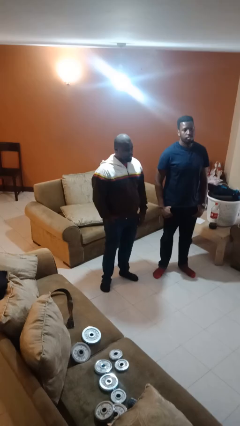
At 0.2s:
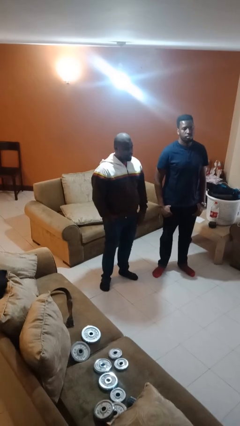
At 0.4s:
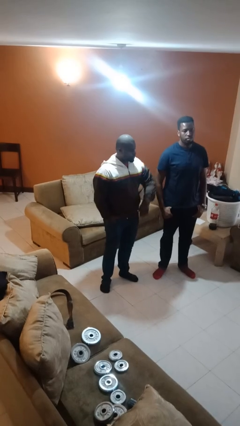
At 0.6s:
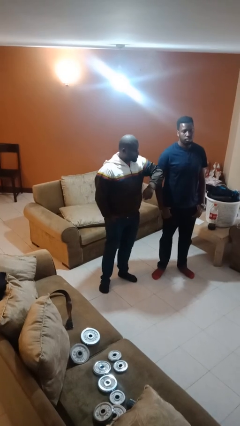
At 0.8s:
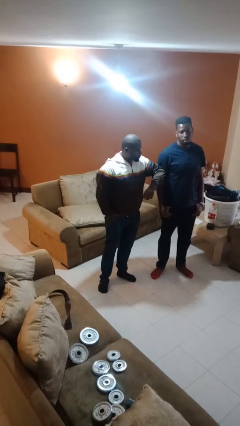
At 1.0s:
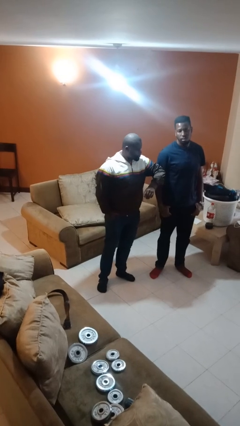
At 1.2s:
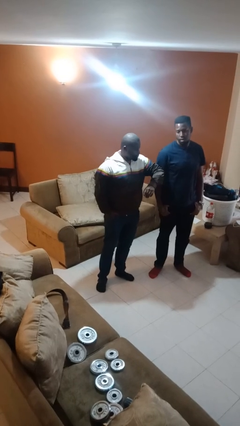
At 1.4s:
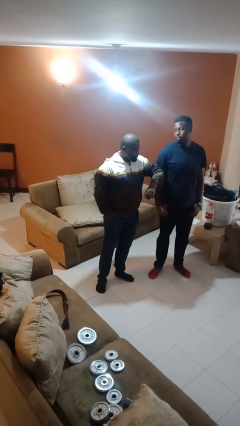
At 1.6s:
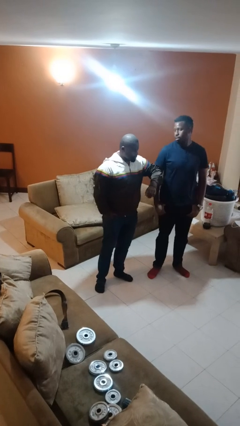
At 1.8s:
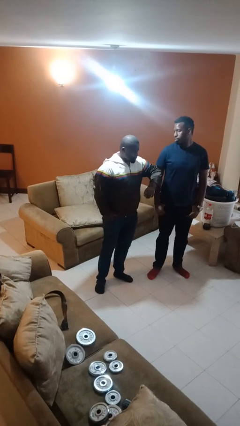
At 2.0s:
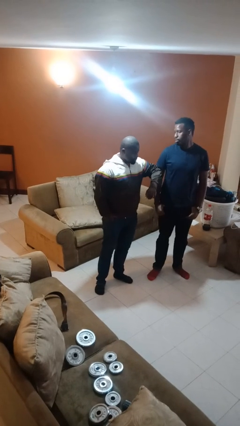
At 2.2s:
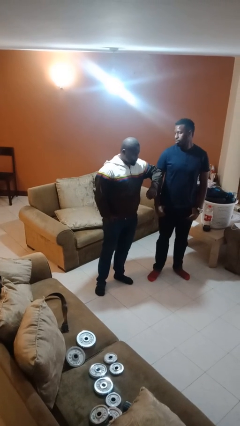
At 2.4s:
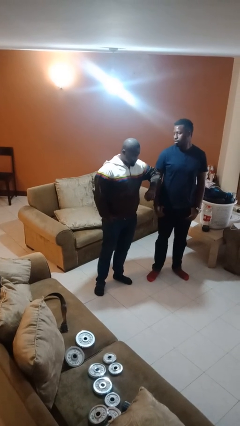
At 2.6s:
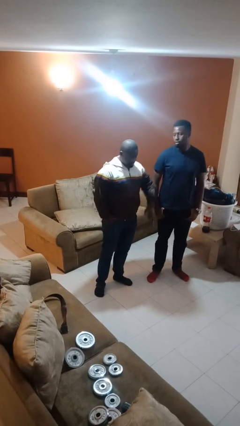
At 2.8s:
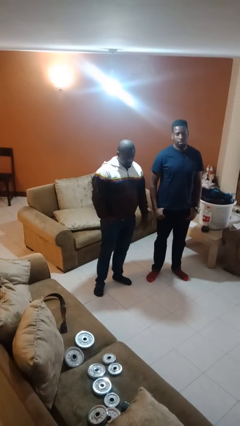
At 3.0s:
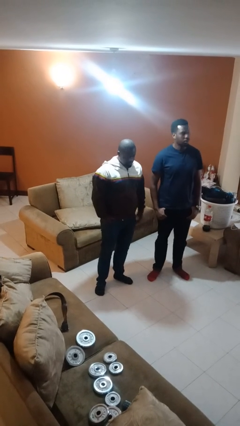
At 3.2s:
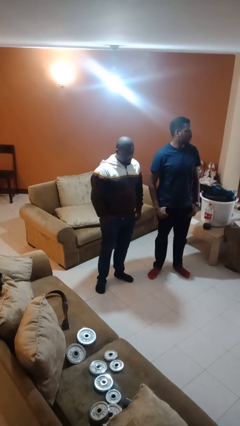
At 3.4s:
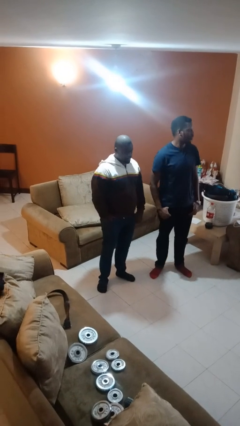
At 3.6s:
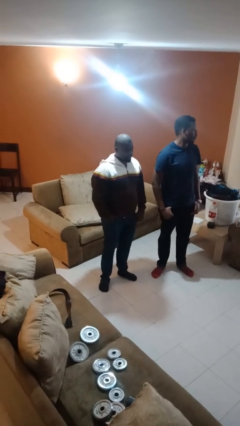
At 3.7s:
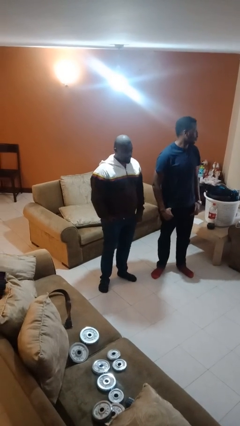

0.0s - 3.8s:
person nudges person with elbow

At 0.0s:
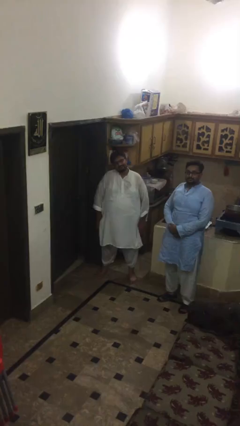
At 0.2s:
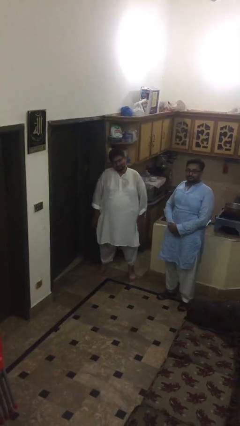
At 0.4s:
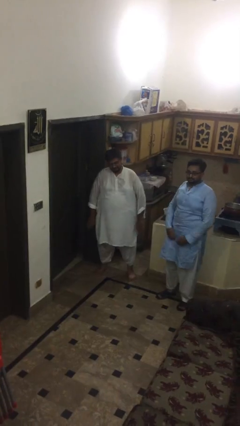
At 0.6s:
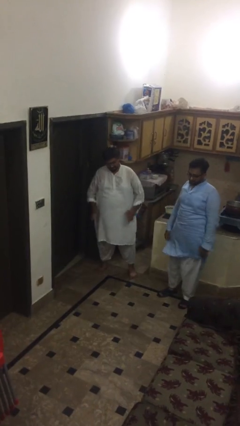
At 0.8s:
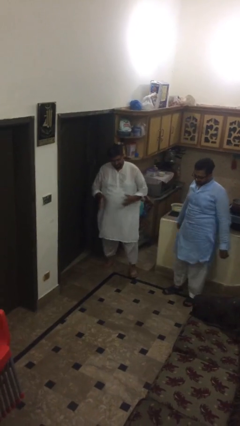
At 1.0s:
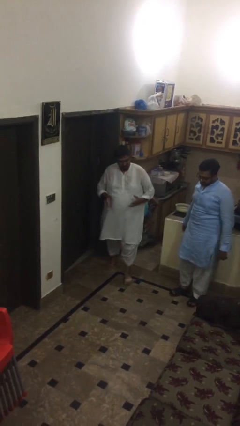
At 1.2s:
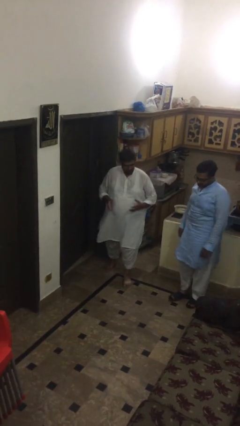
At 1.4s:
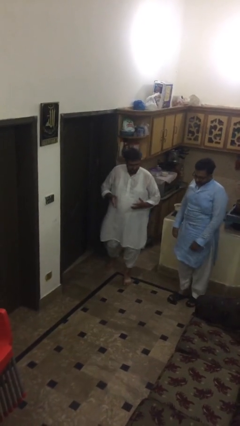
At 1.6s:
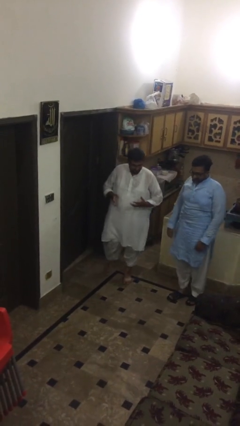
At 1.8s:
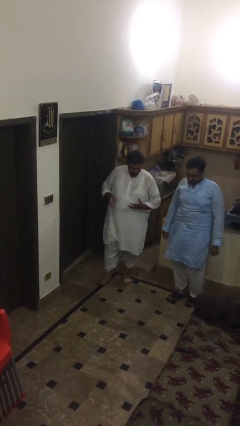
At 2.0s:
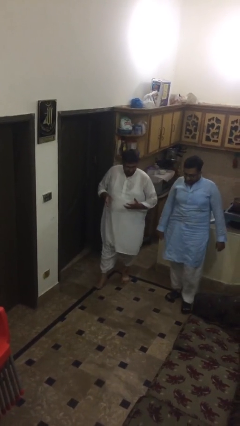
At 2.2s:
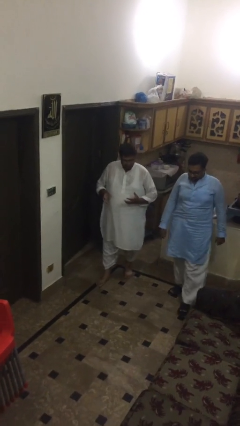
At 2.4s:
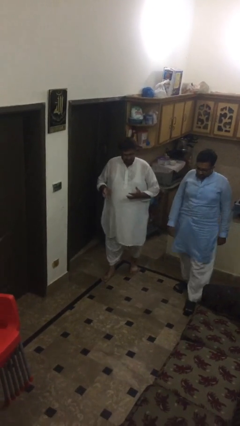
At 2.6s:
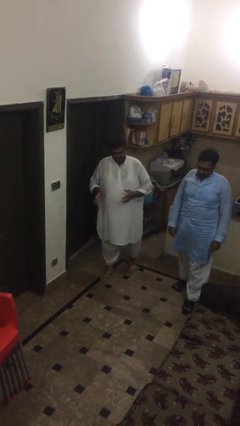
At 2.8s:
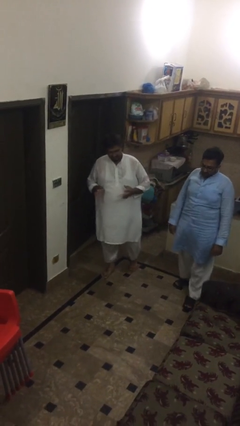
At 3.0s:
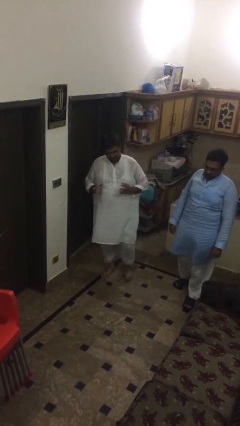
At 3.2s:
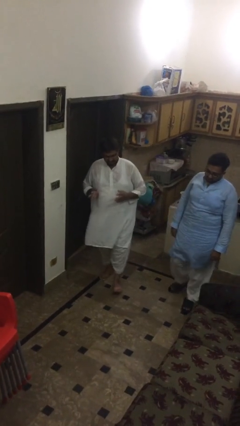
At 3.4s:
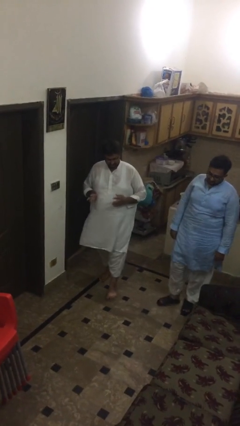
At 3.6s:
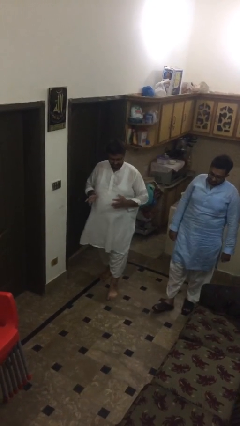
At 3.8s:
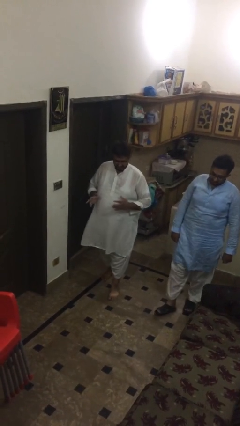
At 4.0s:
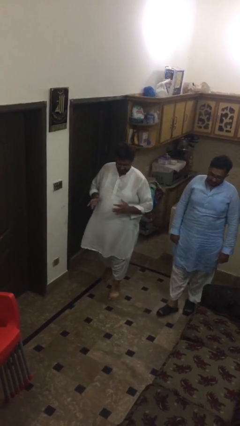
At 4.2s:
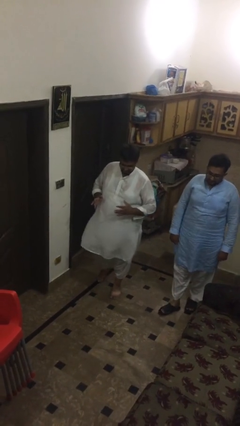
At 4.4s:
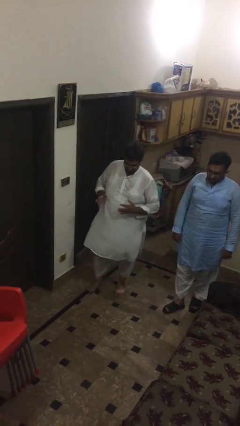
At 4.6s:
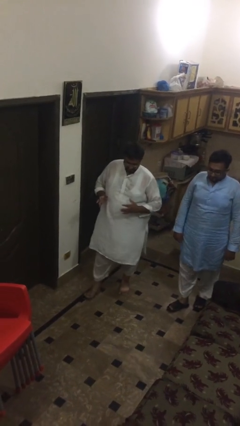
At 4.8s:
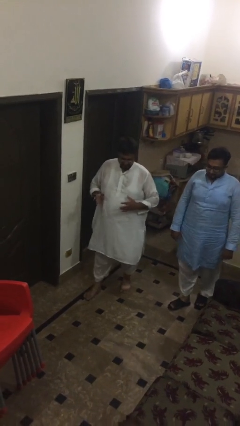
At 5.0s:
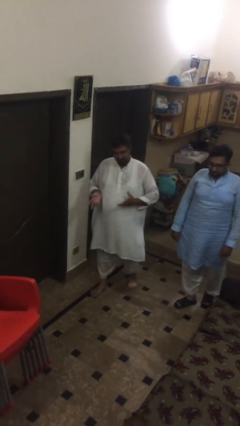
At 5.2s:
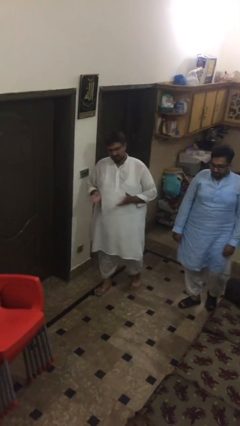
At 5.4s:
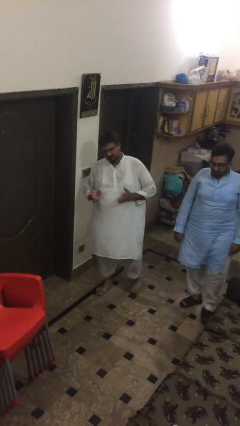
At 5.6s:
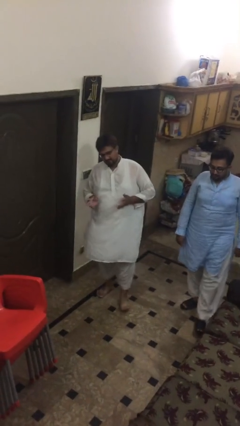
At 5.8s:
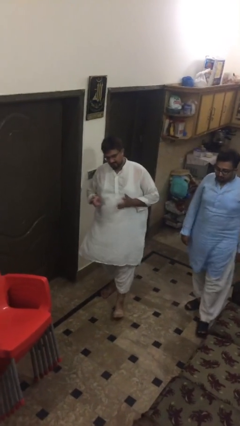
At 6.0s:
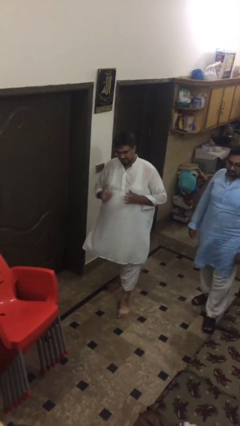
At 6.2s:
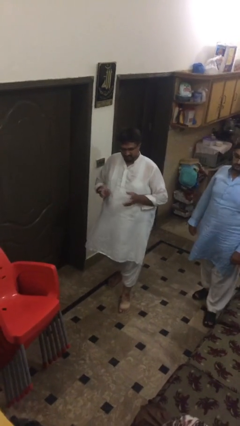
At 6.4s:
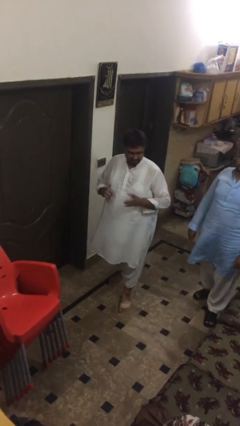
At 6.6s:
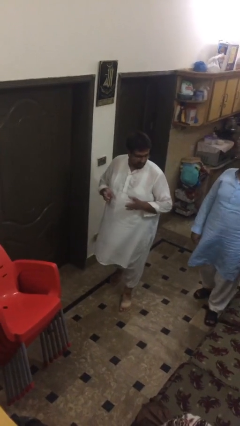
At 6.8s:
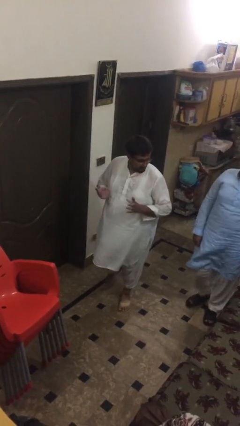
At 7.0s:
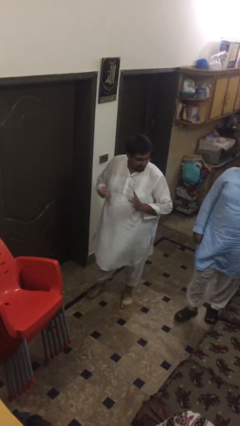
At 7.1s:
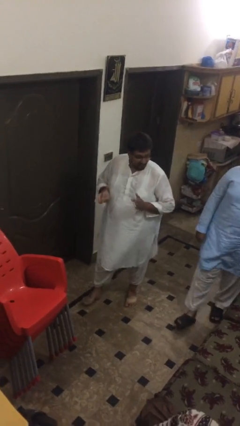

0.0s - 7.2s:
person talks to person

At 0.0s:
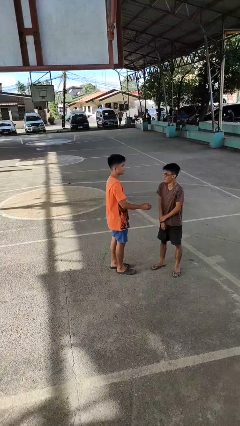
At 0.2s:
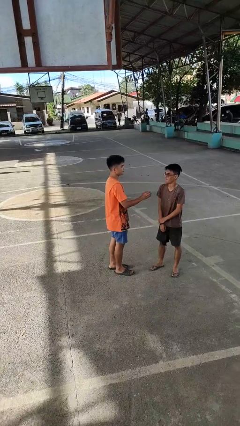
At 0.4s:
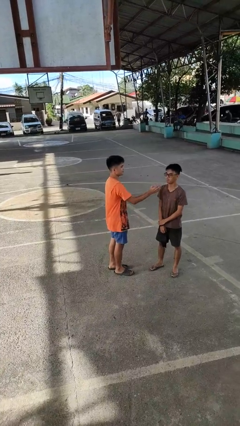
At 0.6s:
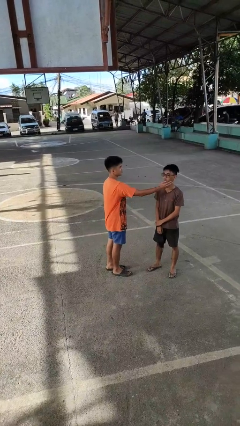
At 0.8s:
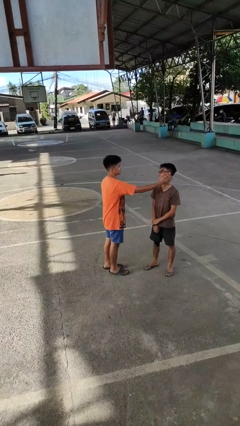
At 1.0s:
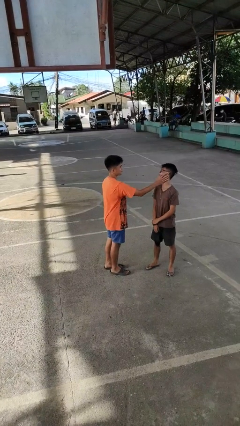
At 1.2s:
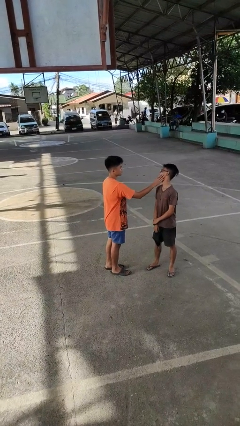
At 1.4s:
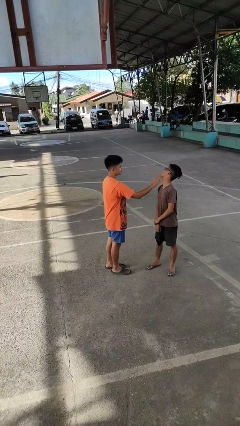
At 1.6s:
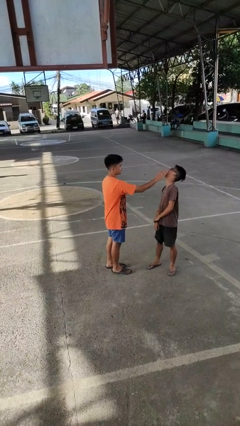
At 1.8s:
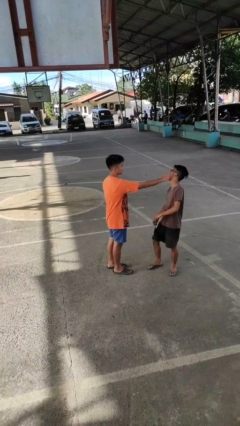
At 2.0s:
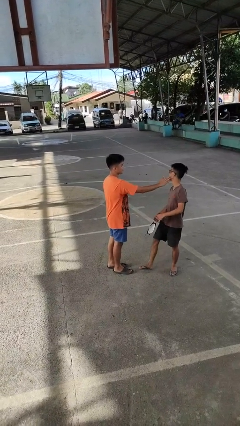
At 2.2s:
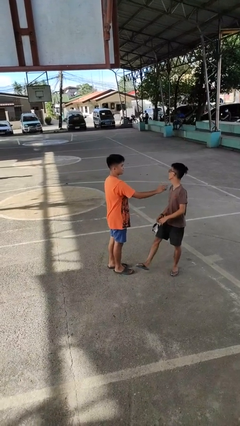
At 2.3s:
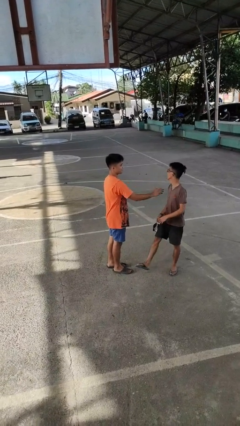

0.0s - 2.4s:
person touches face of person

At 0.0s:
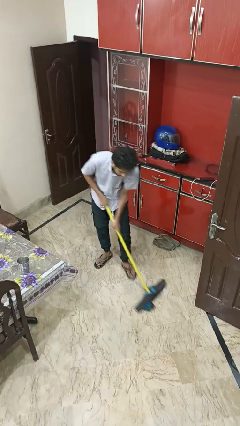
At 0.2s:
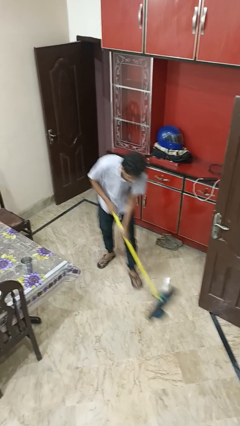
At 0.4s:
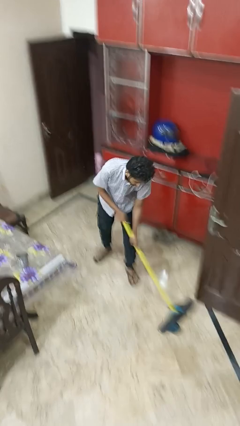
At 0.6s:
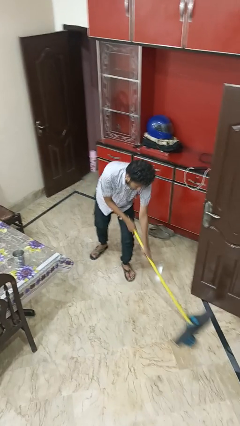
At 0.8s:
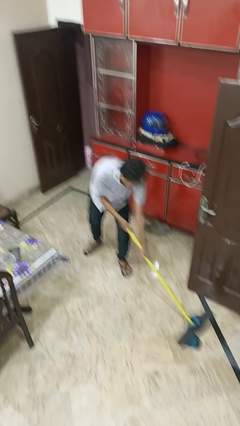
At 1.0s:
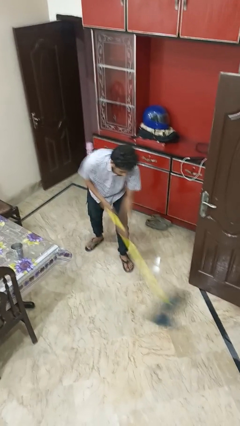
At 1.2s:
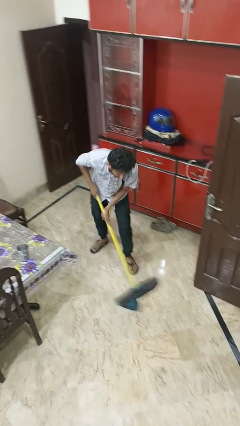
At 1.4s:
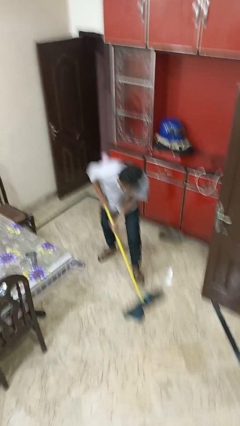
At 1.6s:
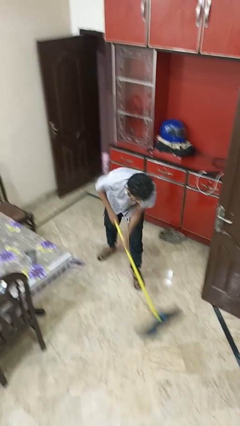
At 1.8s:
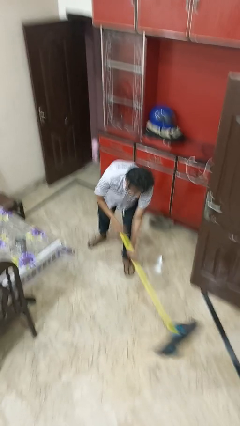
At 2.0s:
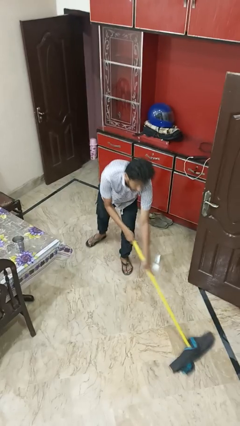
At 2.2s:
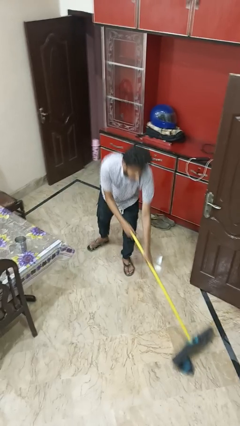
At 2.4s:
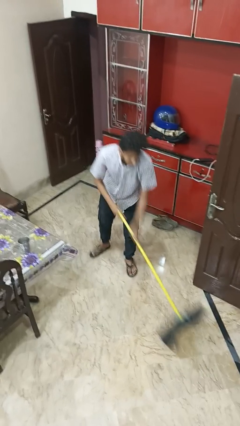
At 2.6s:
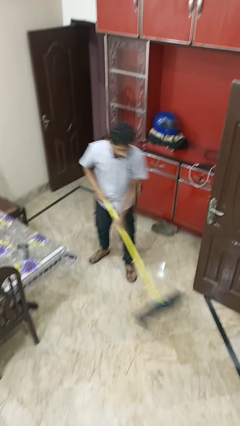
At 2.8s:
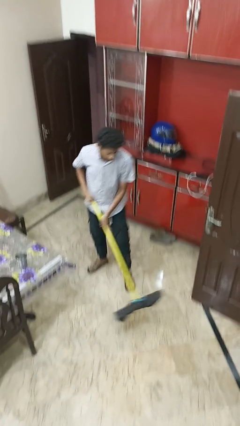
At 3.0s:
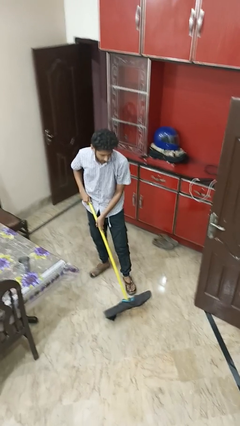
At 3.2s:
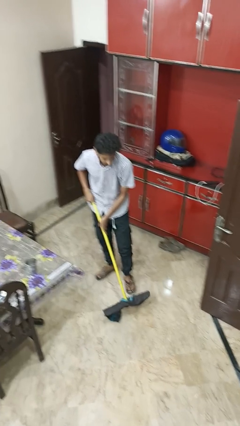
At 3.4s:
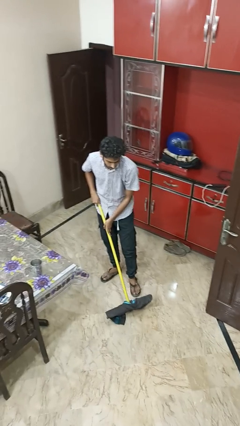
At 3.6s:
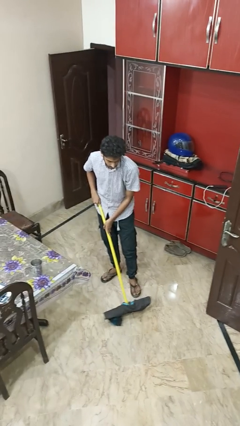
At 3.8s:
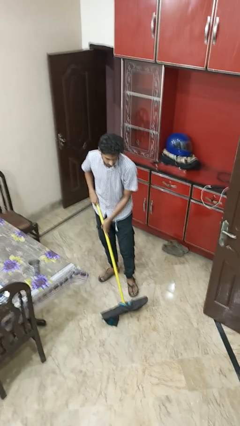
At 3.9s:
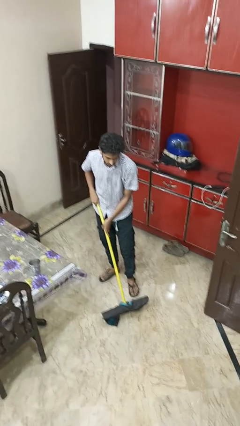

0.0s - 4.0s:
person mops

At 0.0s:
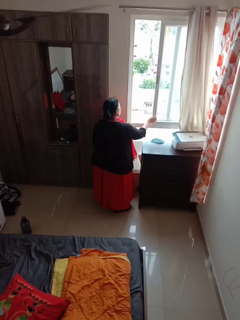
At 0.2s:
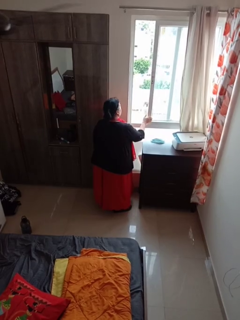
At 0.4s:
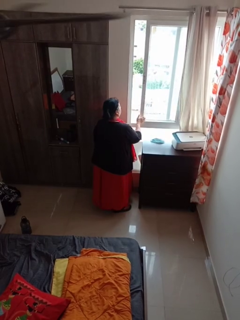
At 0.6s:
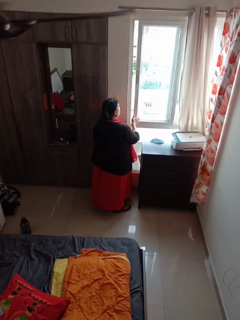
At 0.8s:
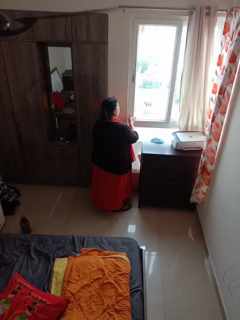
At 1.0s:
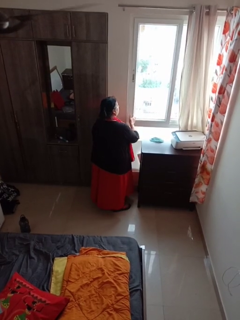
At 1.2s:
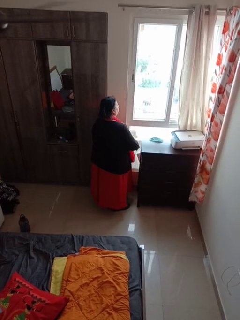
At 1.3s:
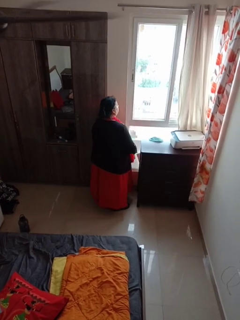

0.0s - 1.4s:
person closes home window
